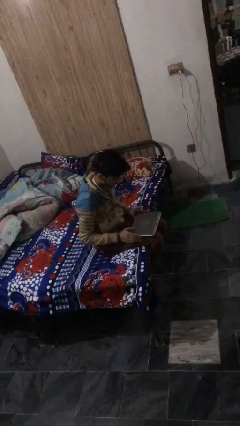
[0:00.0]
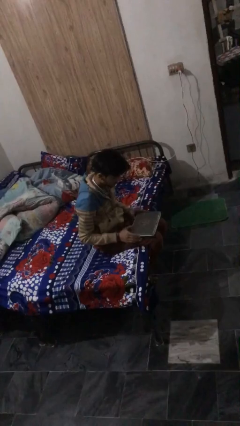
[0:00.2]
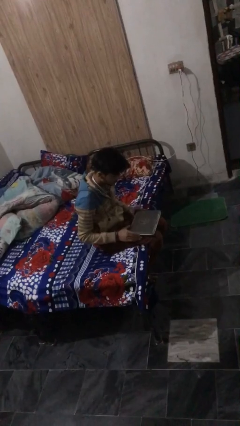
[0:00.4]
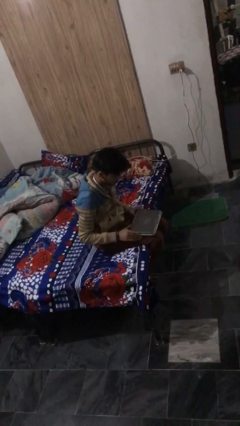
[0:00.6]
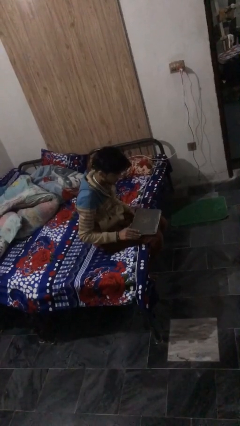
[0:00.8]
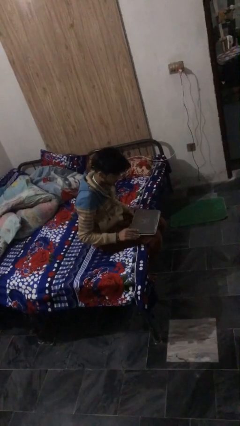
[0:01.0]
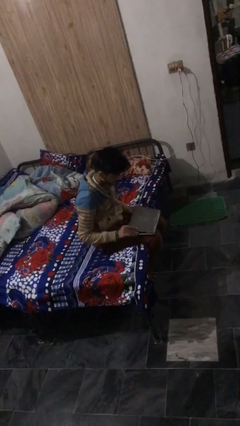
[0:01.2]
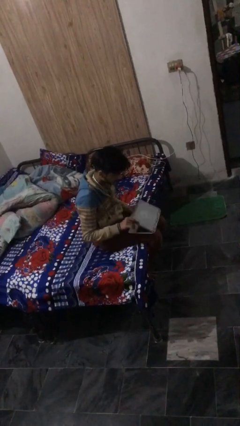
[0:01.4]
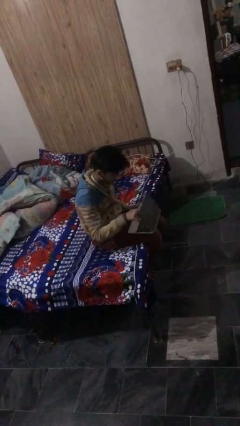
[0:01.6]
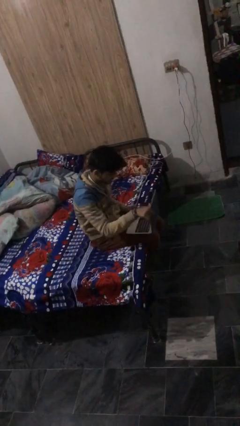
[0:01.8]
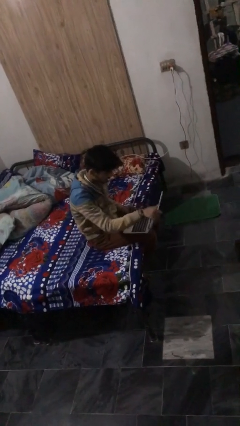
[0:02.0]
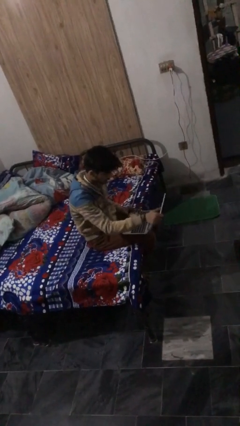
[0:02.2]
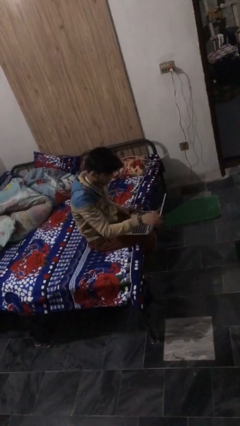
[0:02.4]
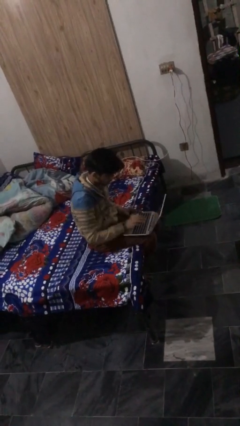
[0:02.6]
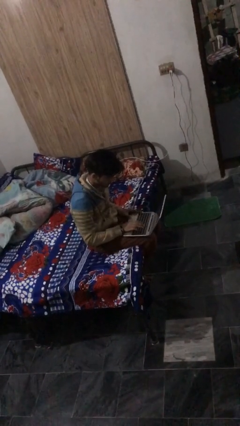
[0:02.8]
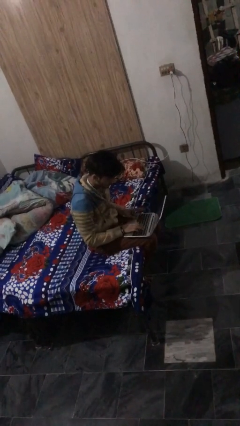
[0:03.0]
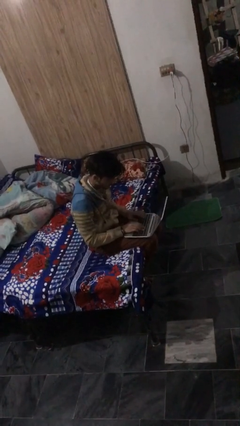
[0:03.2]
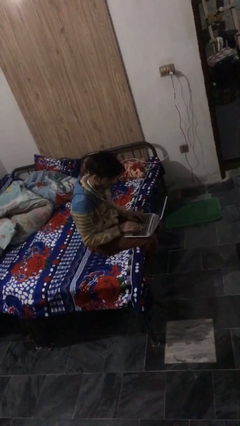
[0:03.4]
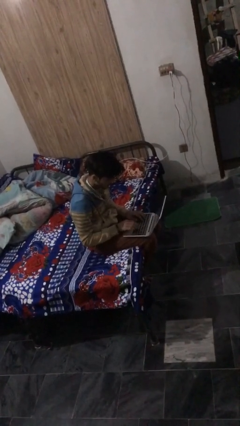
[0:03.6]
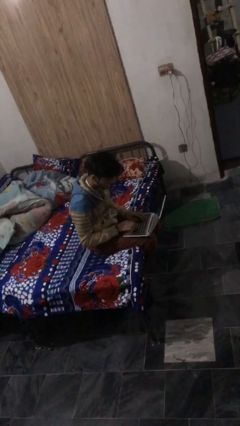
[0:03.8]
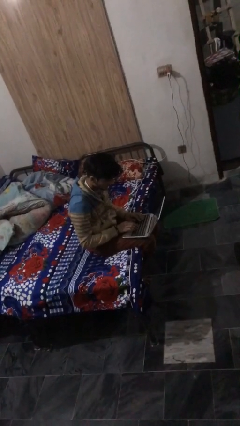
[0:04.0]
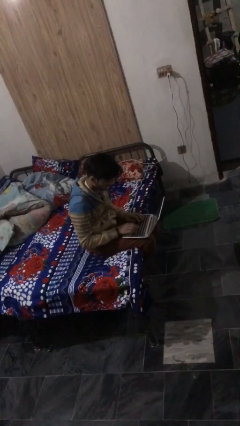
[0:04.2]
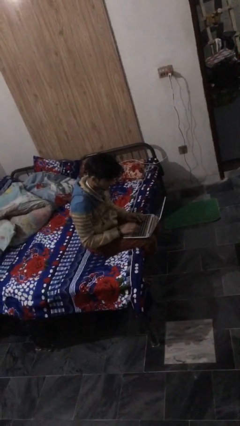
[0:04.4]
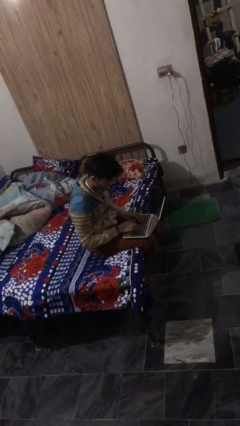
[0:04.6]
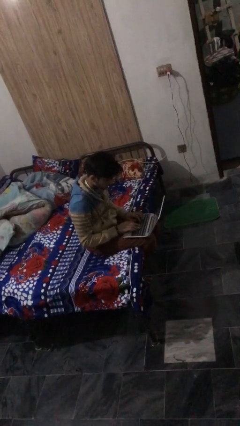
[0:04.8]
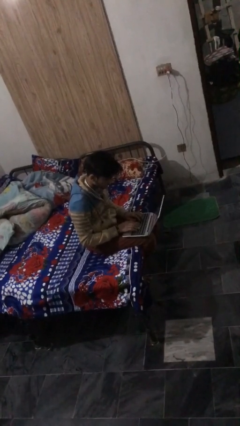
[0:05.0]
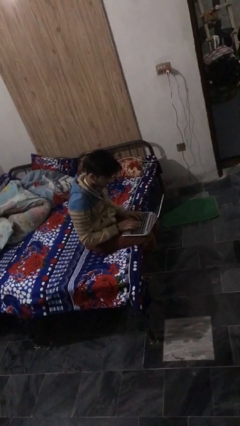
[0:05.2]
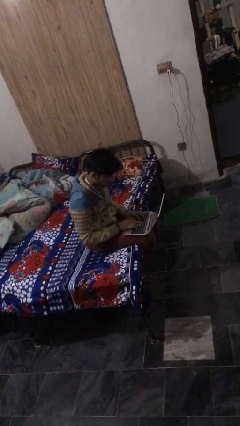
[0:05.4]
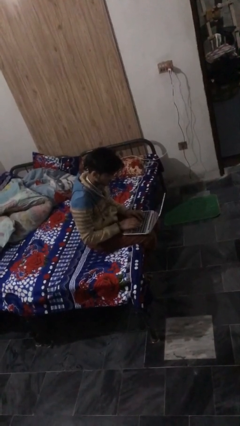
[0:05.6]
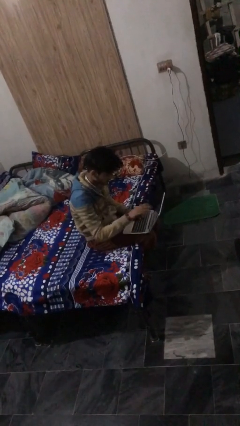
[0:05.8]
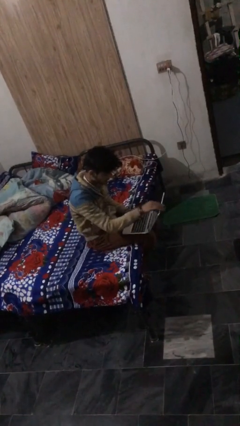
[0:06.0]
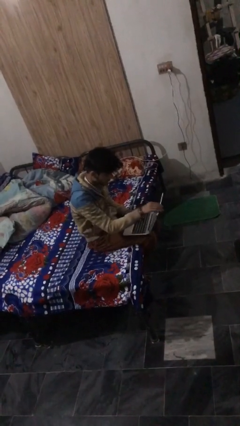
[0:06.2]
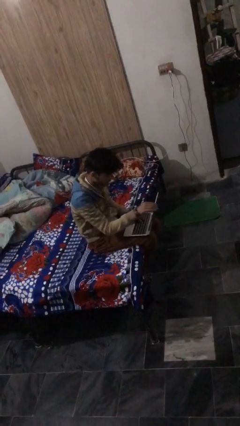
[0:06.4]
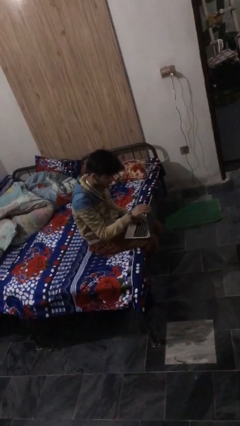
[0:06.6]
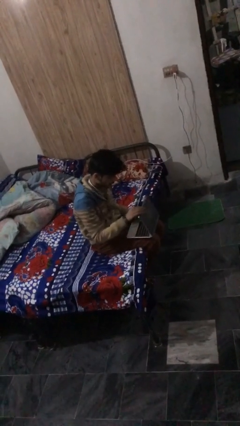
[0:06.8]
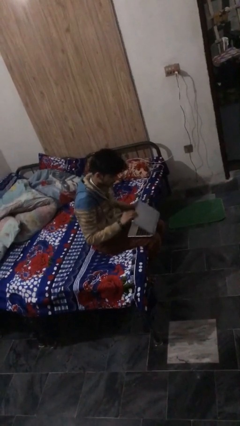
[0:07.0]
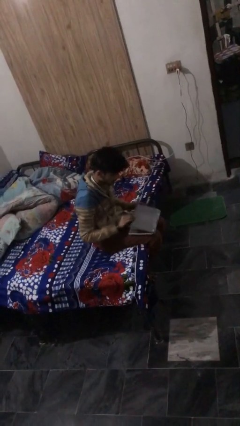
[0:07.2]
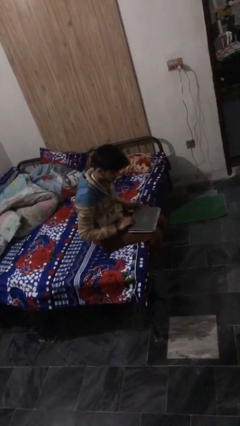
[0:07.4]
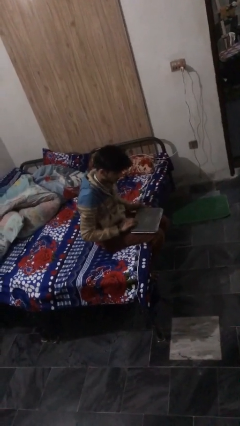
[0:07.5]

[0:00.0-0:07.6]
person interacts with laptop

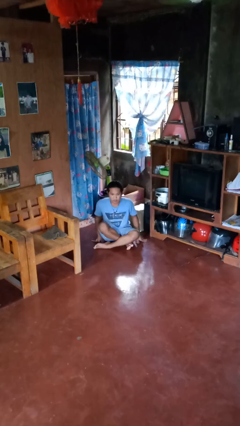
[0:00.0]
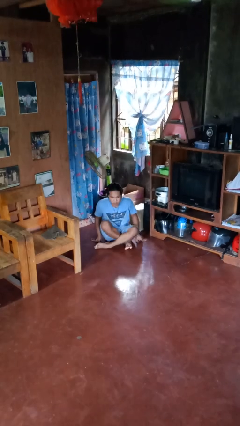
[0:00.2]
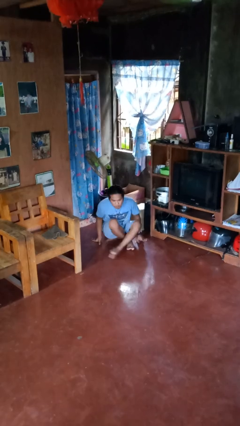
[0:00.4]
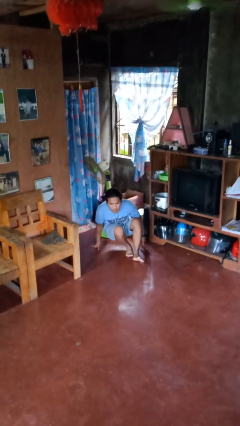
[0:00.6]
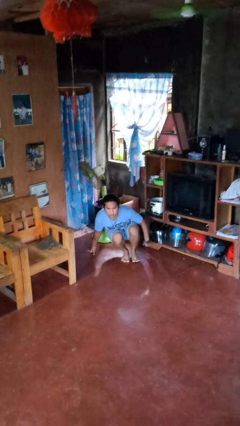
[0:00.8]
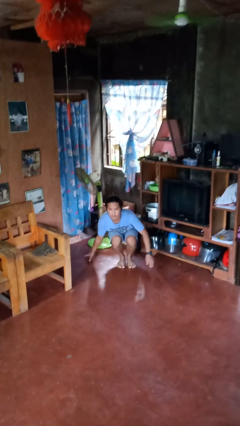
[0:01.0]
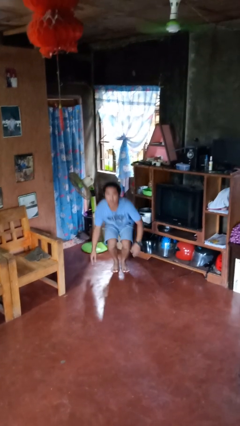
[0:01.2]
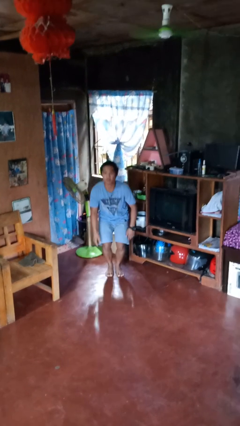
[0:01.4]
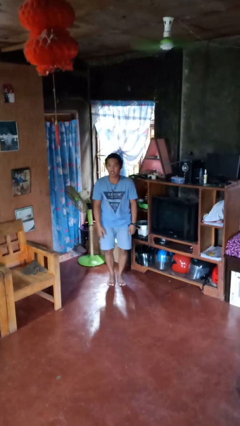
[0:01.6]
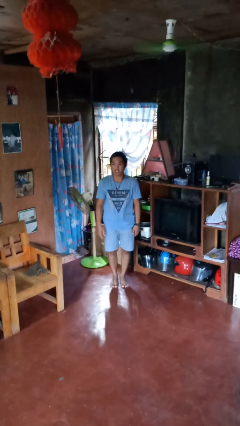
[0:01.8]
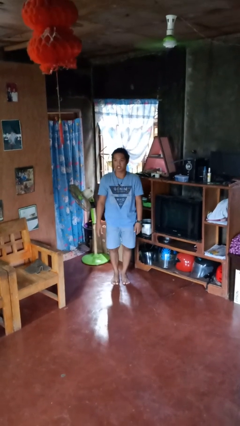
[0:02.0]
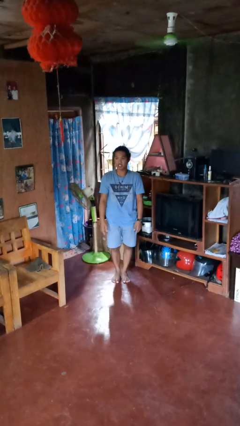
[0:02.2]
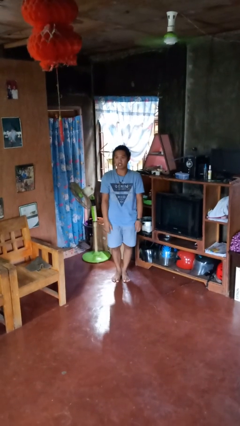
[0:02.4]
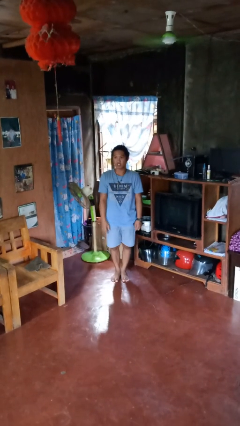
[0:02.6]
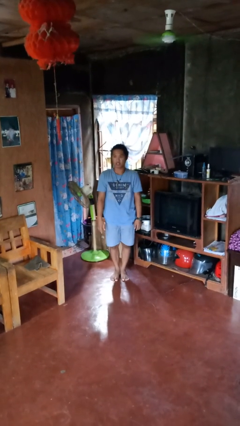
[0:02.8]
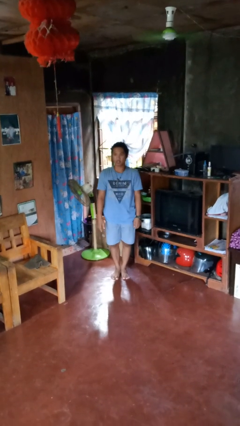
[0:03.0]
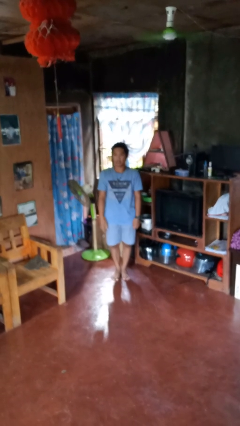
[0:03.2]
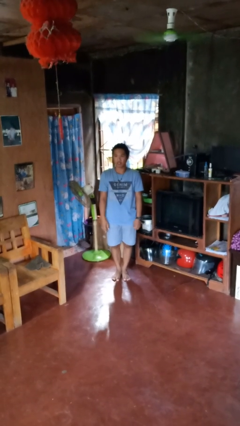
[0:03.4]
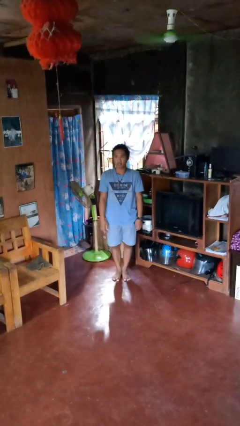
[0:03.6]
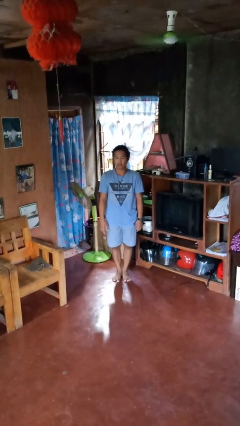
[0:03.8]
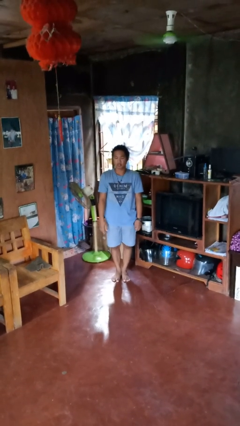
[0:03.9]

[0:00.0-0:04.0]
person stands up from floor

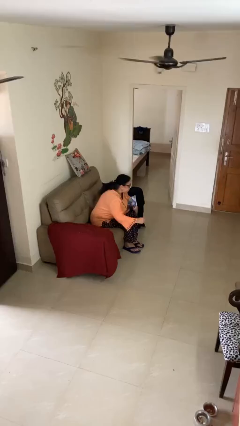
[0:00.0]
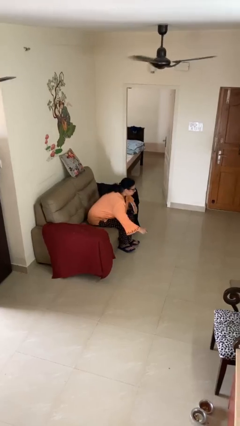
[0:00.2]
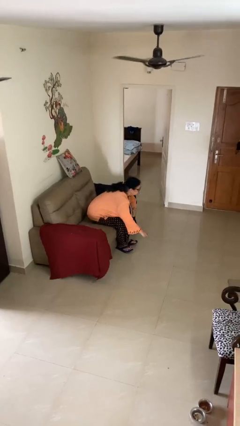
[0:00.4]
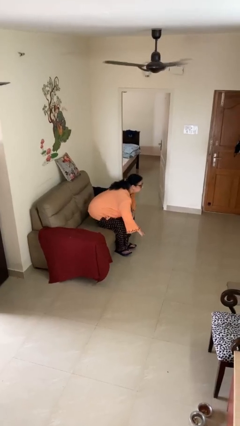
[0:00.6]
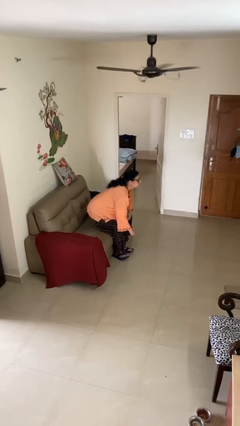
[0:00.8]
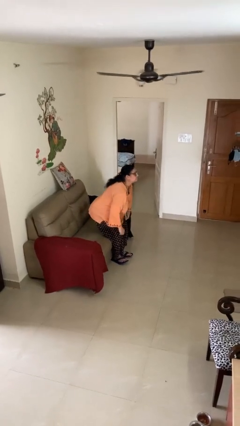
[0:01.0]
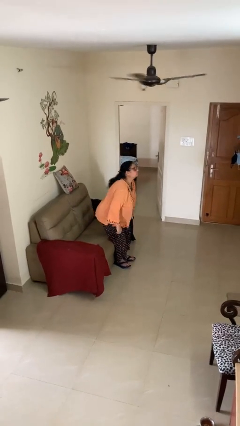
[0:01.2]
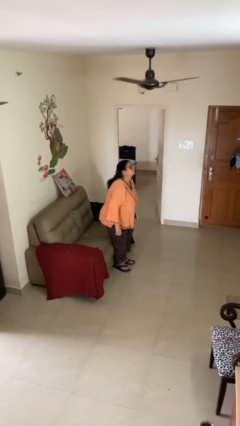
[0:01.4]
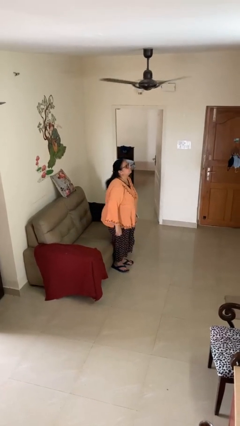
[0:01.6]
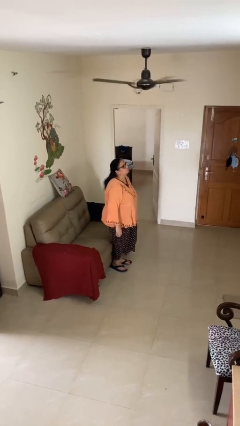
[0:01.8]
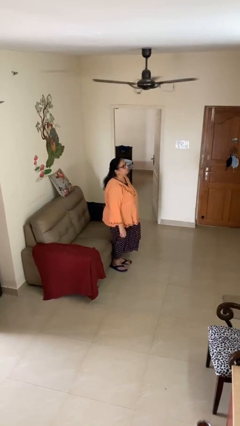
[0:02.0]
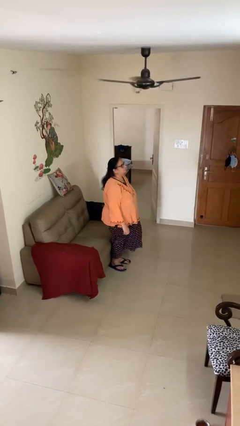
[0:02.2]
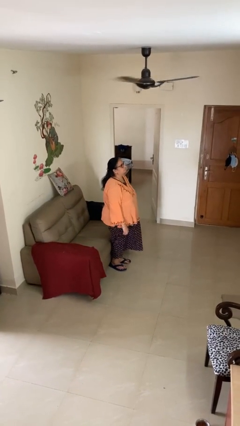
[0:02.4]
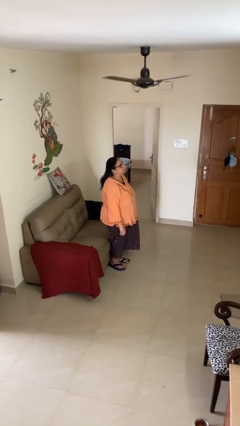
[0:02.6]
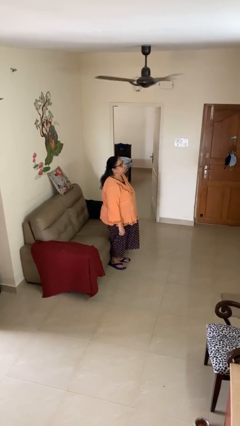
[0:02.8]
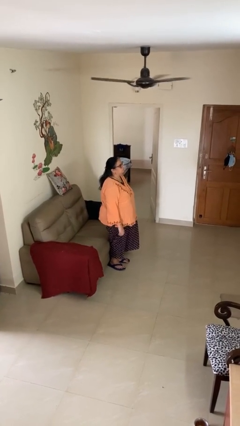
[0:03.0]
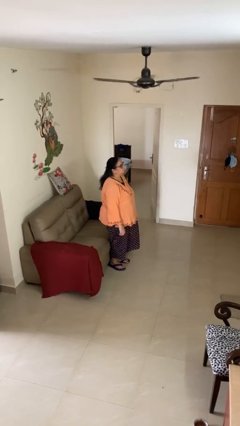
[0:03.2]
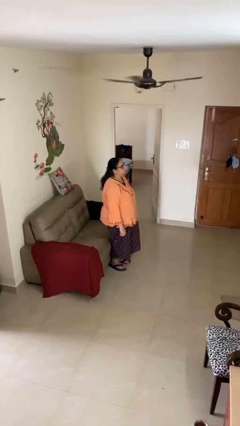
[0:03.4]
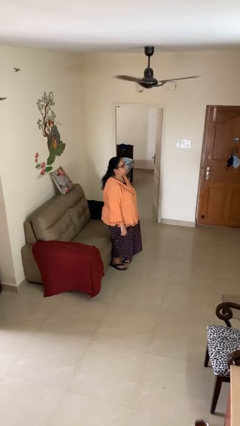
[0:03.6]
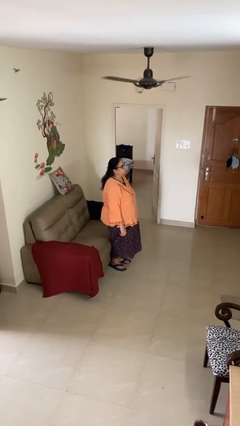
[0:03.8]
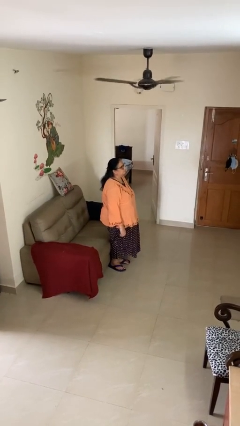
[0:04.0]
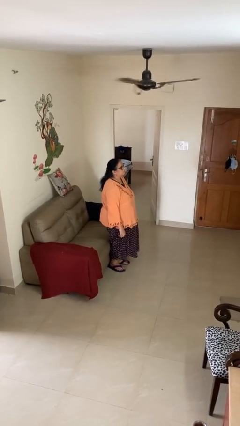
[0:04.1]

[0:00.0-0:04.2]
person stands up

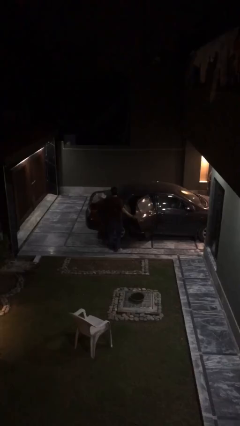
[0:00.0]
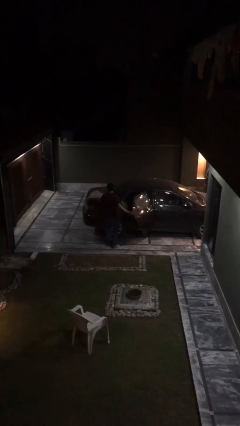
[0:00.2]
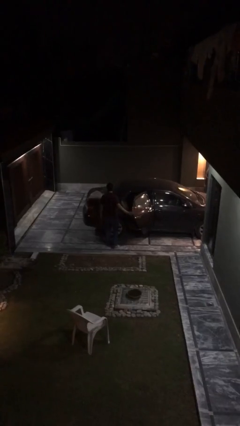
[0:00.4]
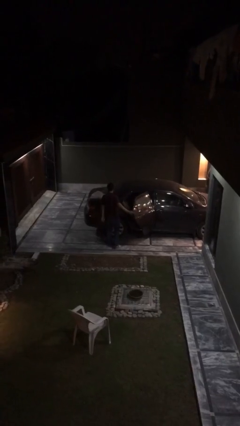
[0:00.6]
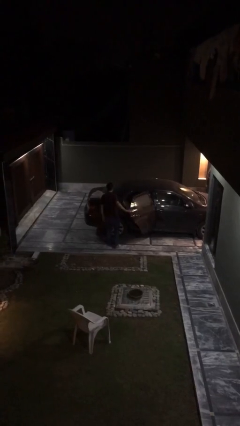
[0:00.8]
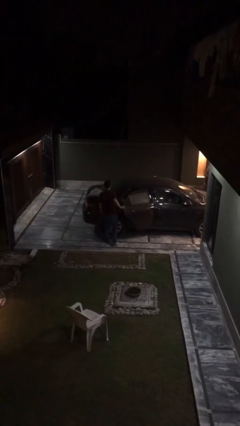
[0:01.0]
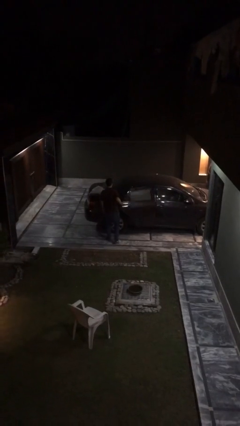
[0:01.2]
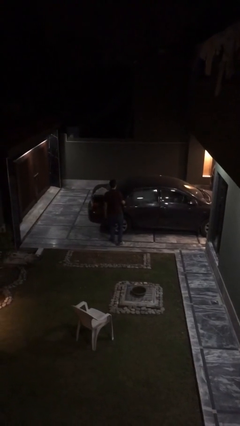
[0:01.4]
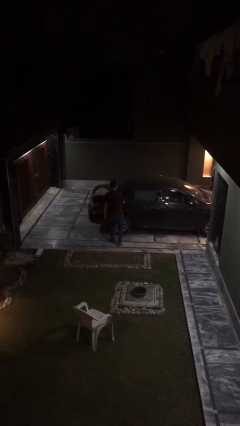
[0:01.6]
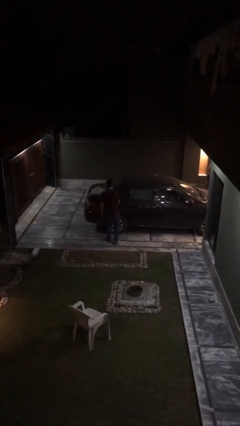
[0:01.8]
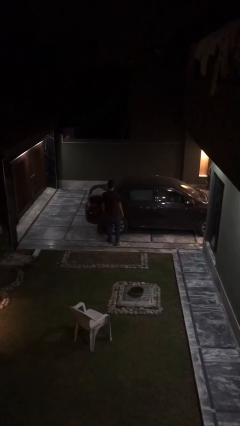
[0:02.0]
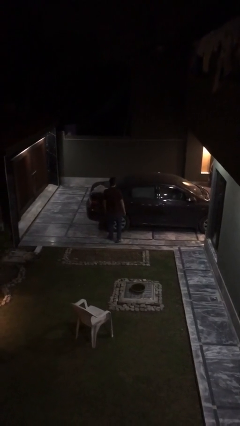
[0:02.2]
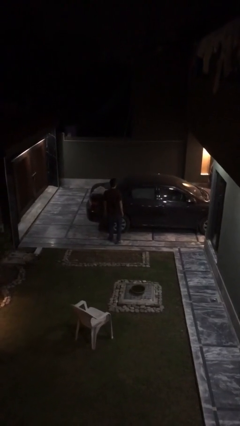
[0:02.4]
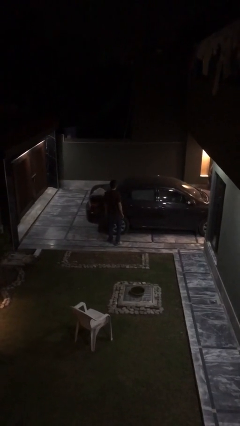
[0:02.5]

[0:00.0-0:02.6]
person closes car door
